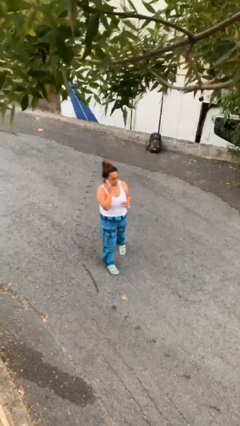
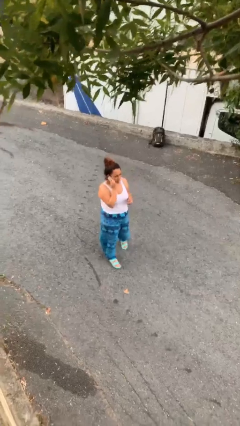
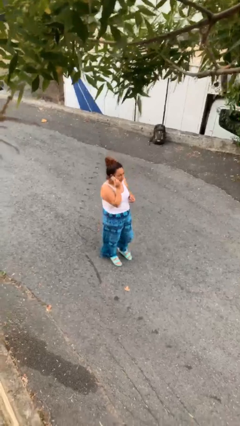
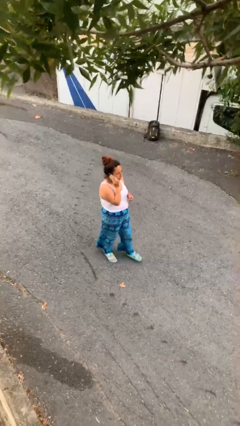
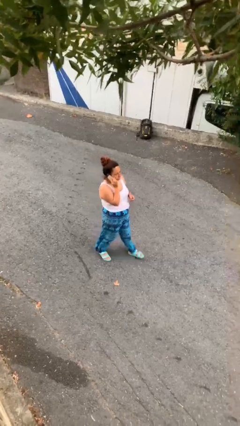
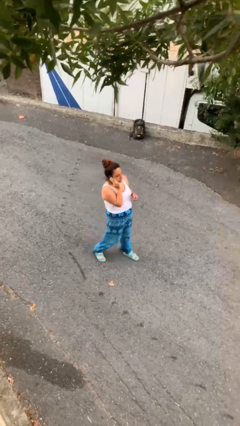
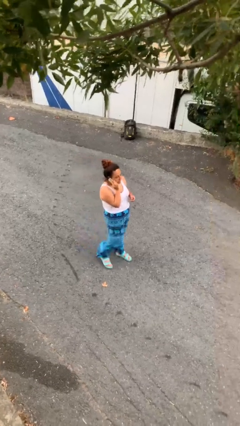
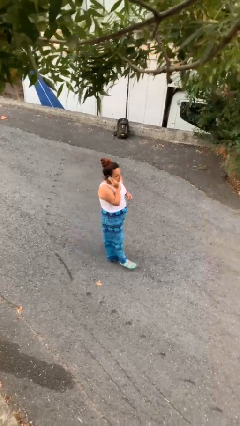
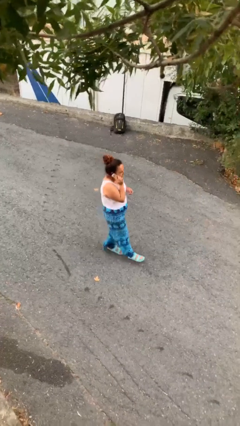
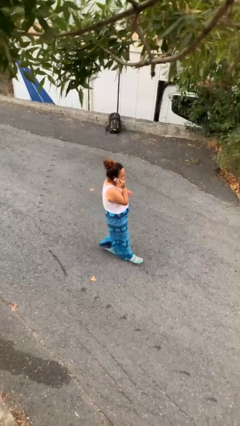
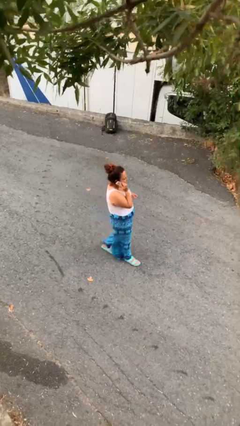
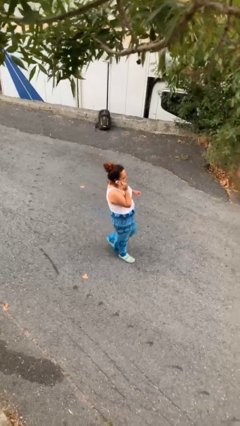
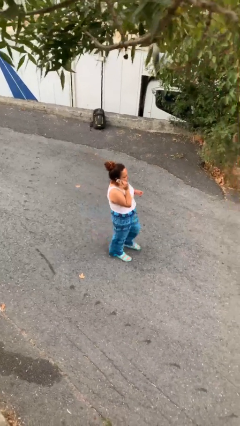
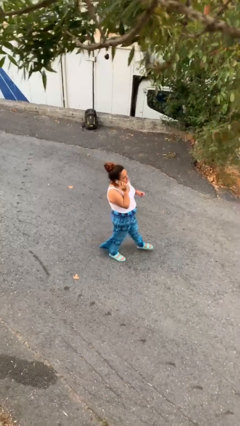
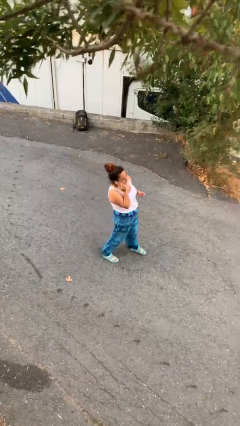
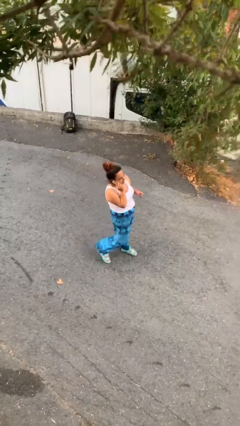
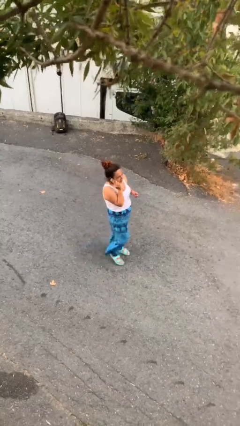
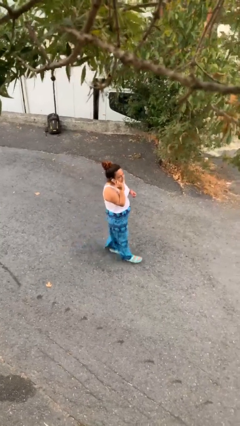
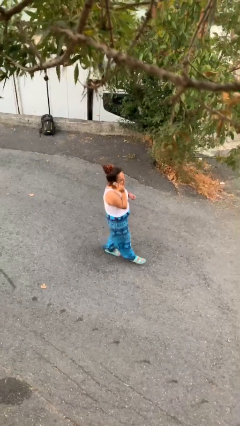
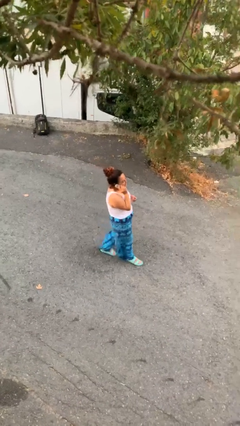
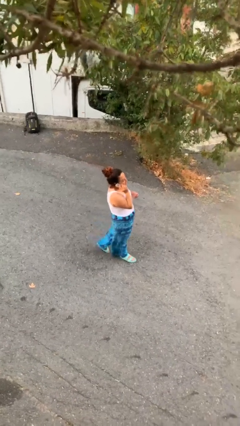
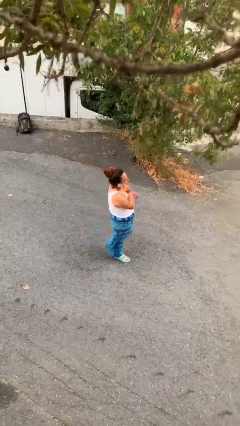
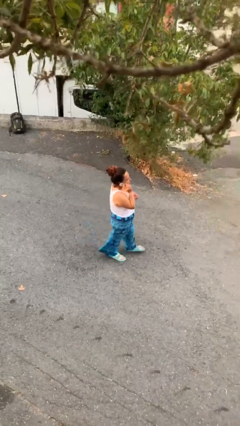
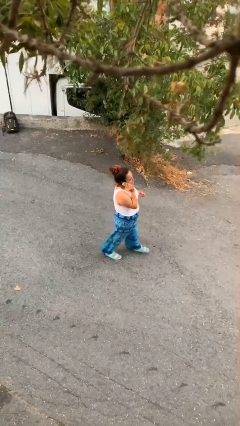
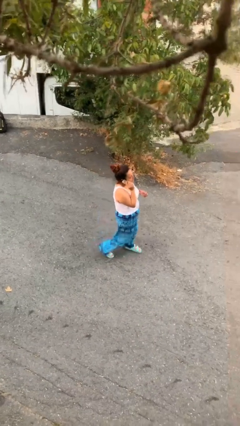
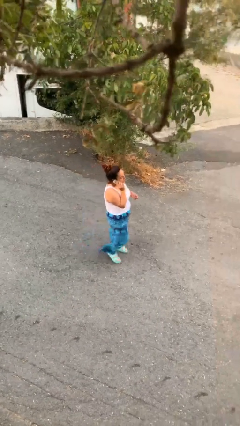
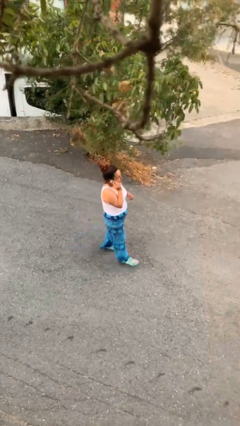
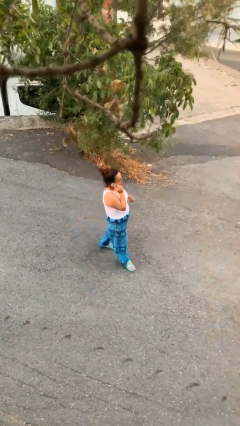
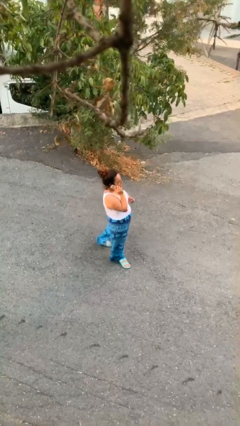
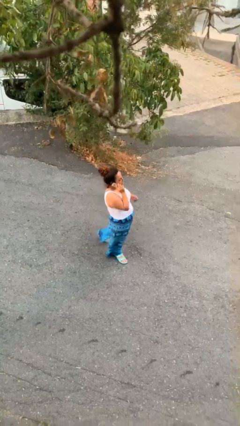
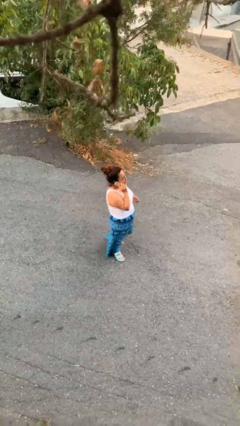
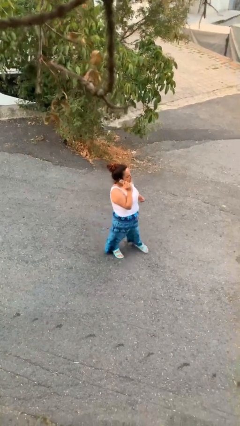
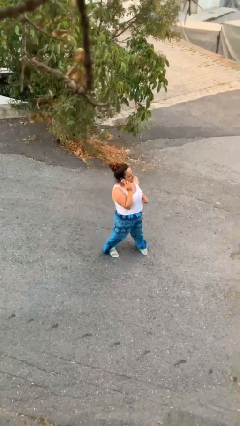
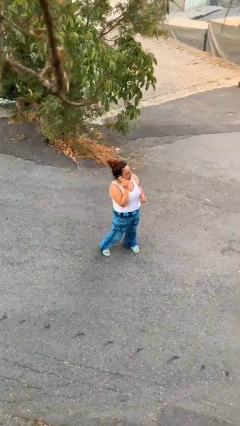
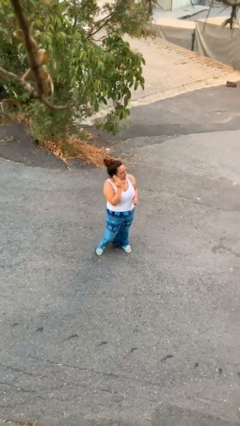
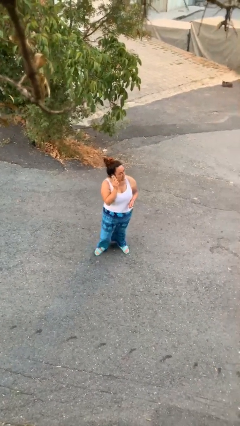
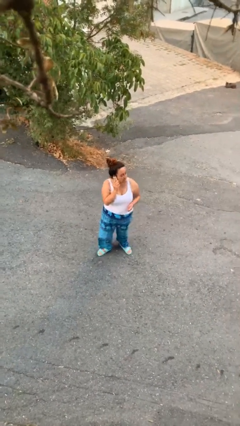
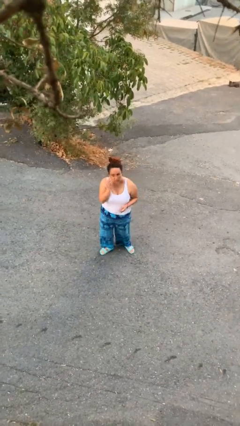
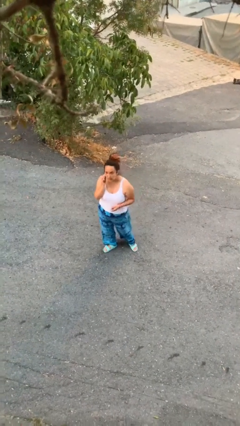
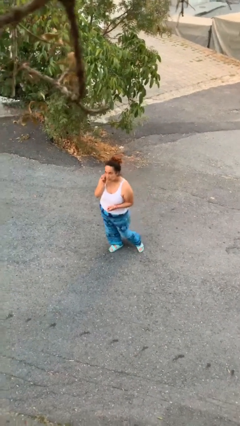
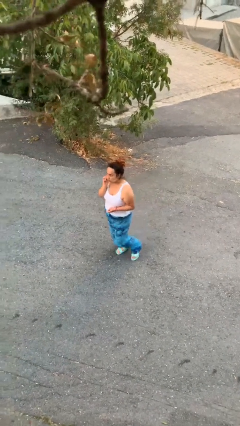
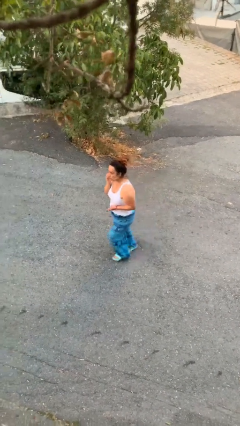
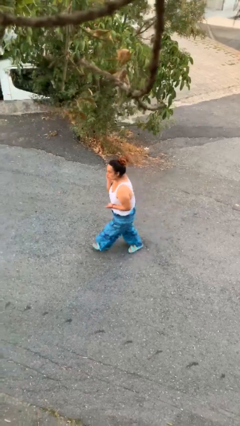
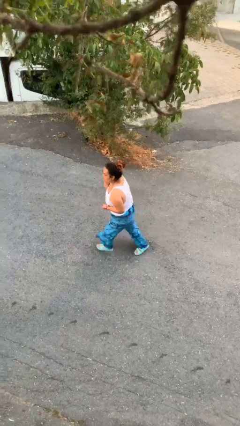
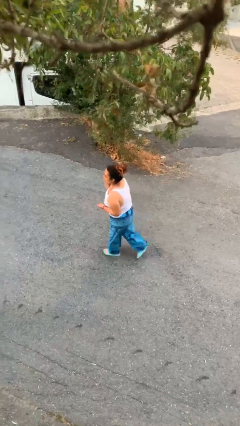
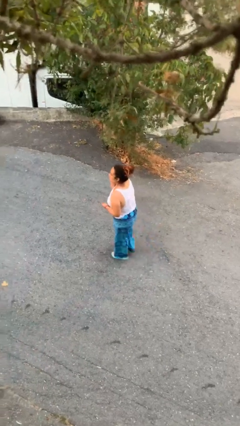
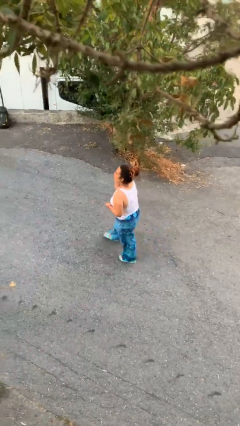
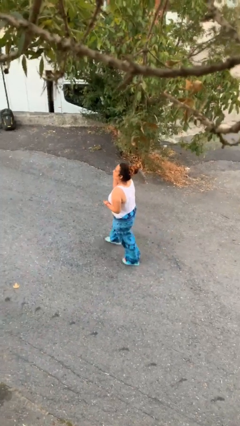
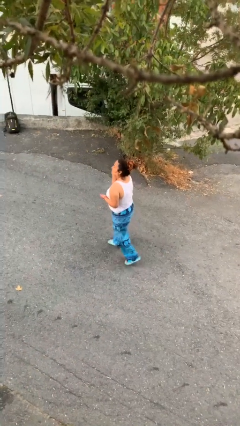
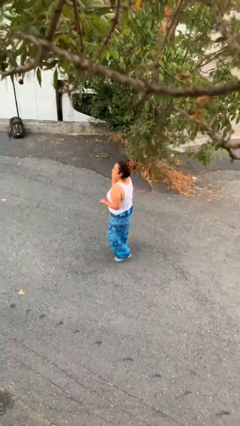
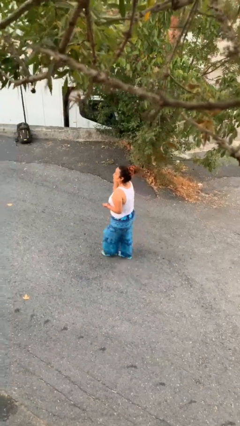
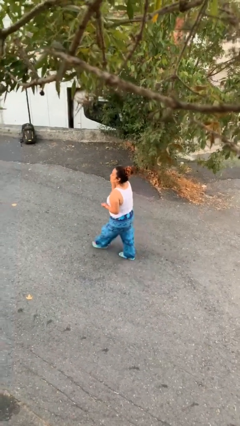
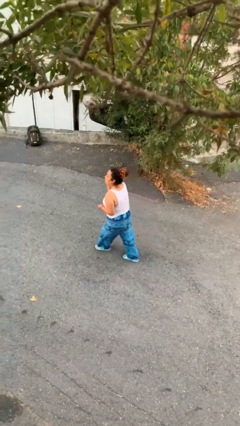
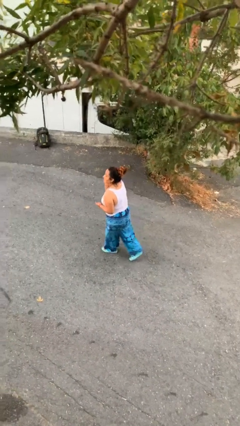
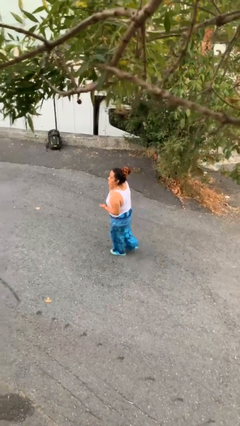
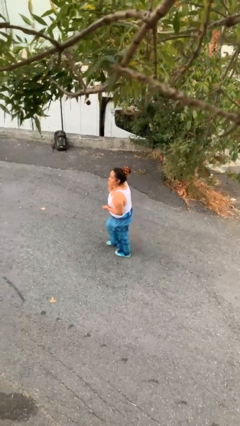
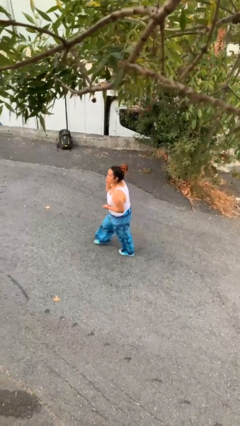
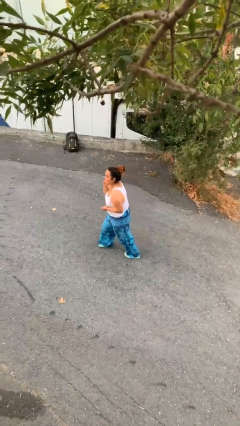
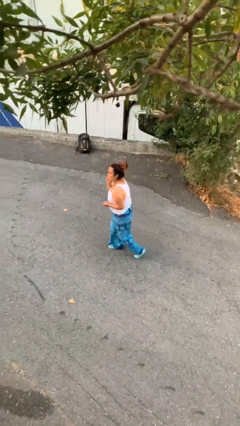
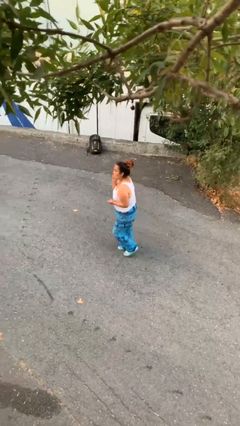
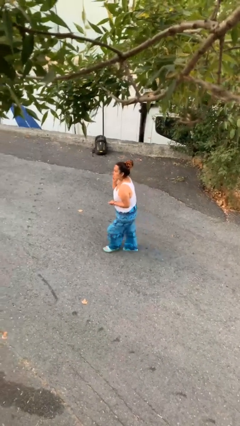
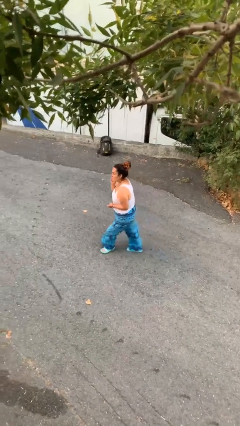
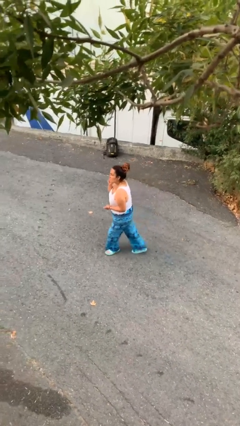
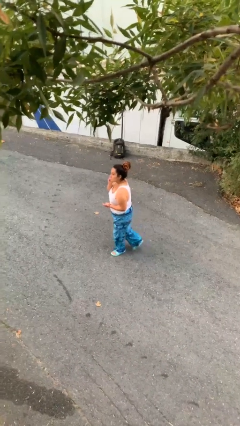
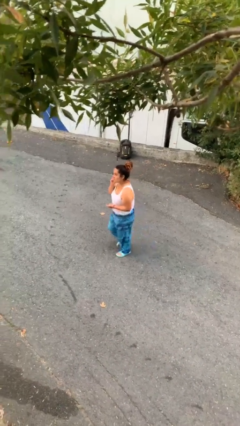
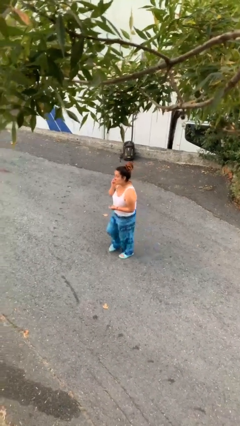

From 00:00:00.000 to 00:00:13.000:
person talks on phone

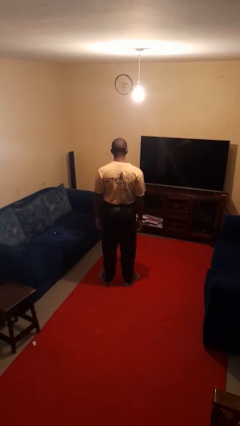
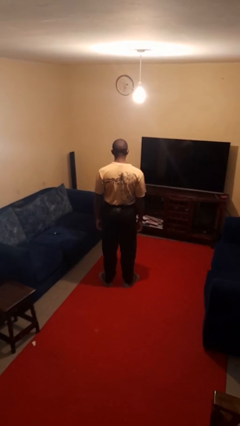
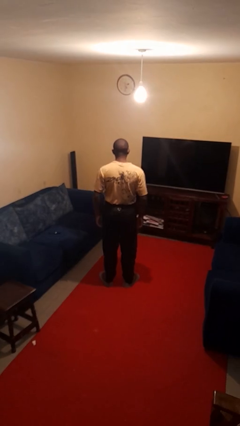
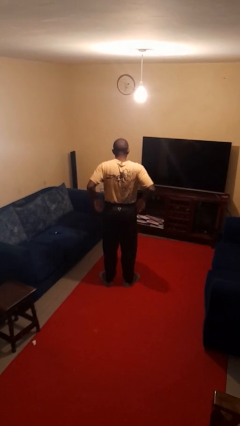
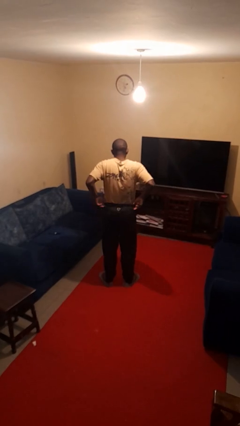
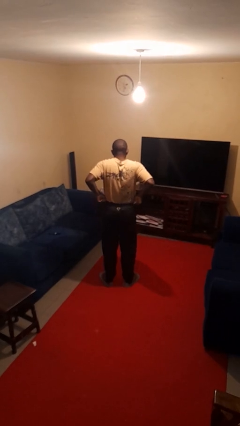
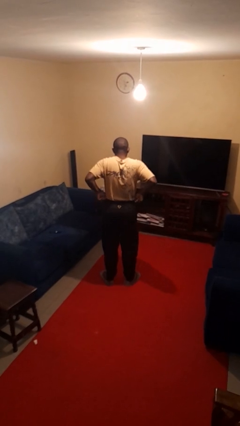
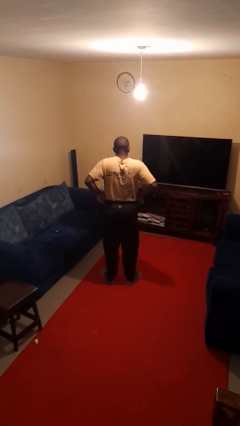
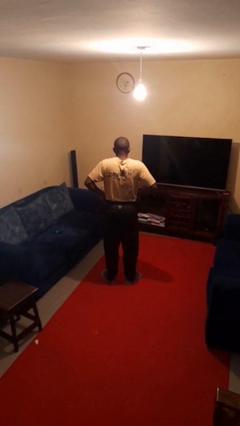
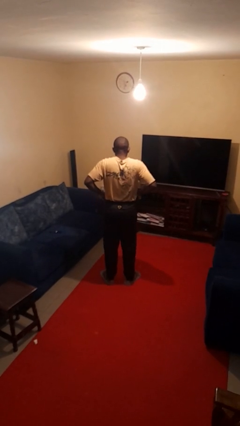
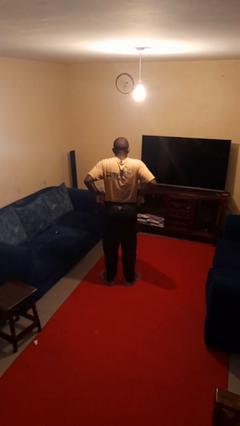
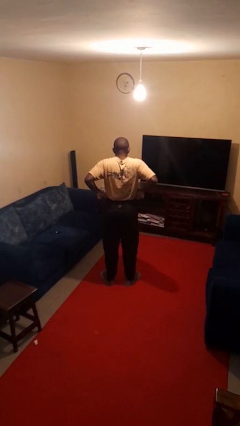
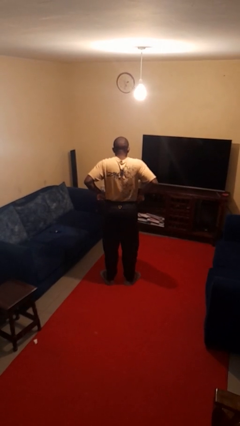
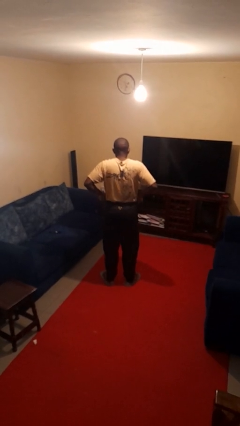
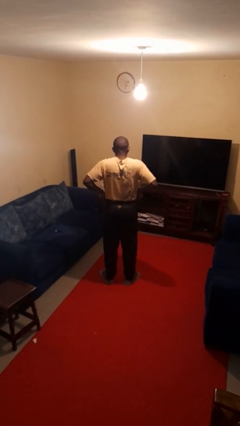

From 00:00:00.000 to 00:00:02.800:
person hikes up pants

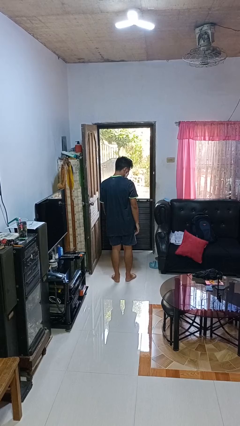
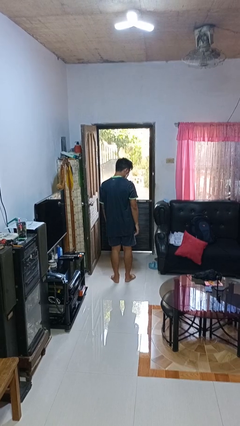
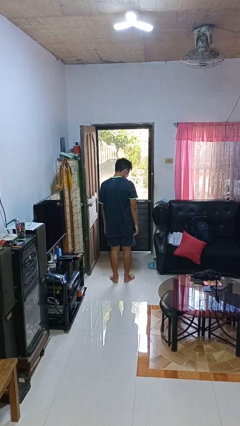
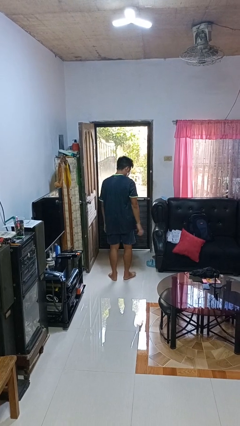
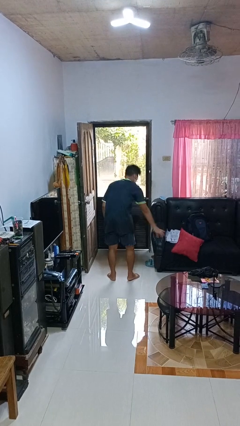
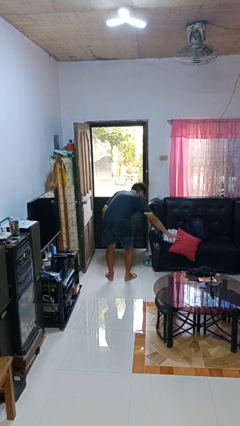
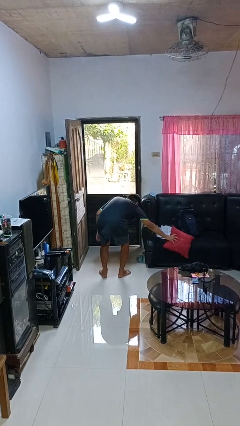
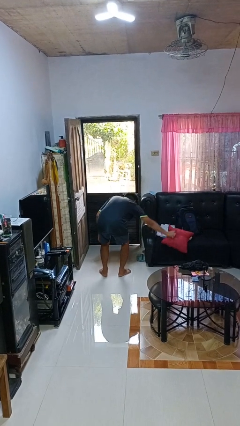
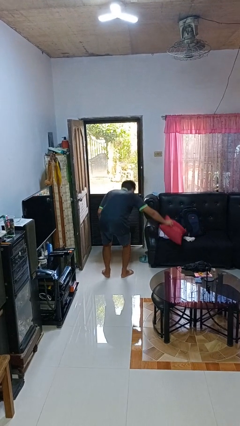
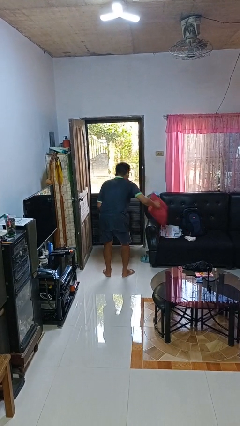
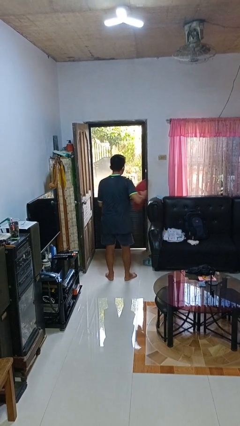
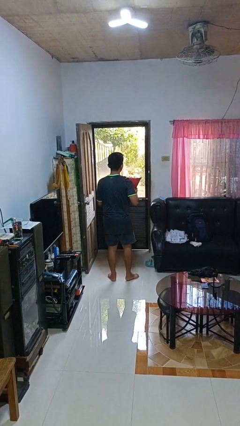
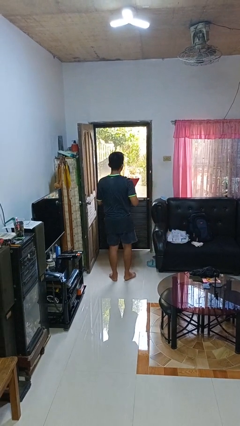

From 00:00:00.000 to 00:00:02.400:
person picks up object from floor
